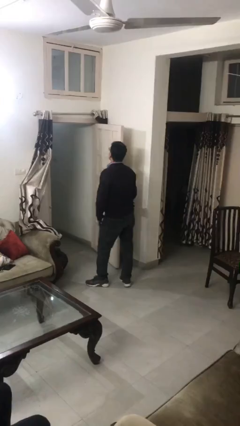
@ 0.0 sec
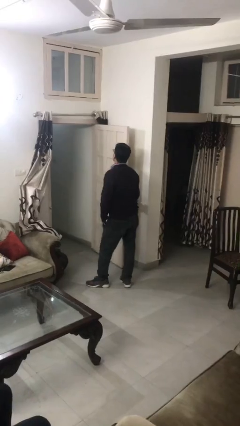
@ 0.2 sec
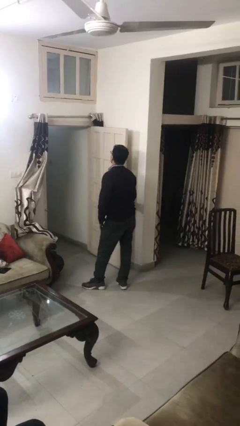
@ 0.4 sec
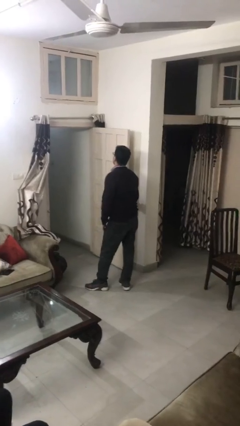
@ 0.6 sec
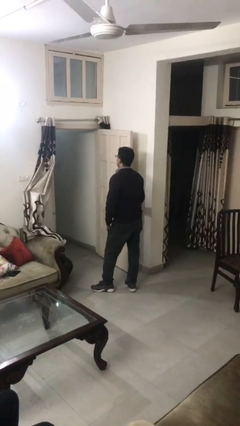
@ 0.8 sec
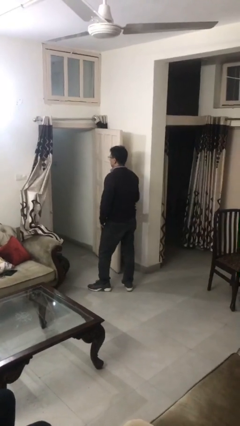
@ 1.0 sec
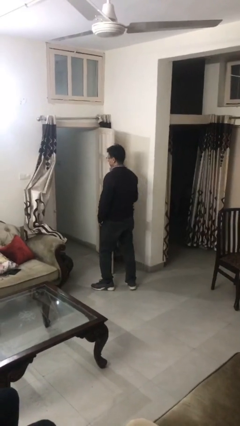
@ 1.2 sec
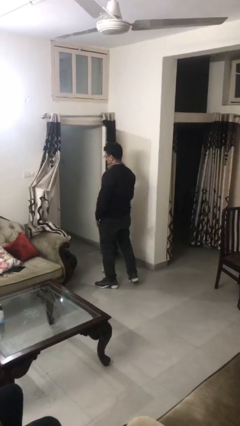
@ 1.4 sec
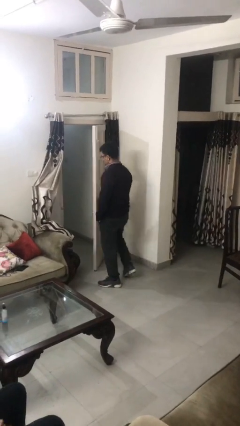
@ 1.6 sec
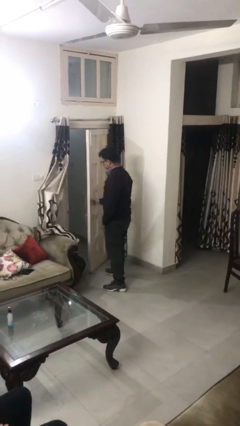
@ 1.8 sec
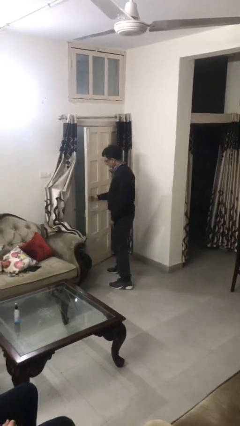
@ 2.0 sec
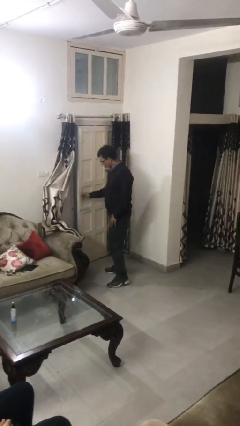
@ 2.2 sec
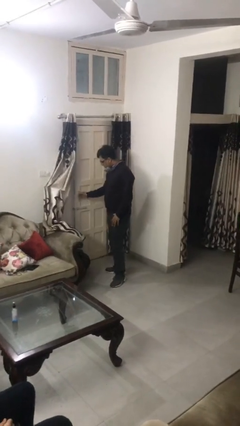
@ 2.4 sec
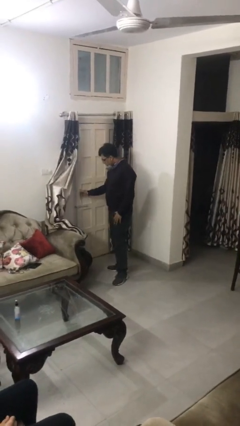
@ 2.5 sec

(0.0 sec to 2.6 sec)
person closes facility door

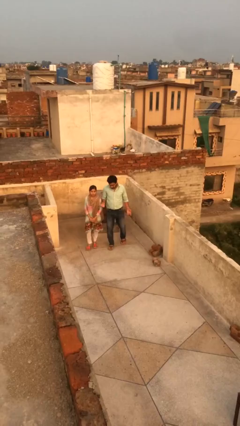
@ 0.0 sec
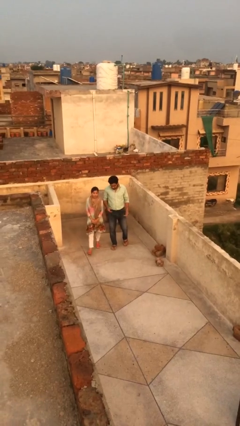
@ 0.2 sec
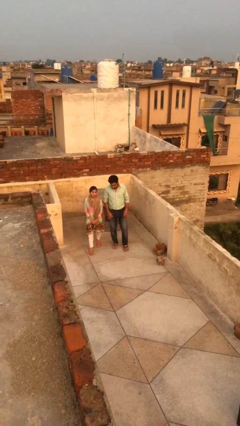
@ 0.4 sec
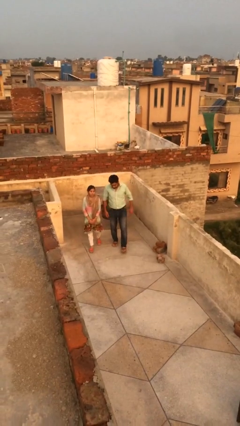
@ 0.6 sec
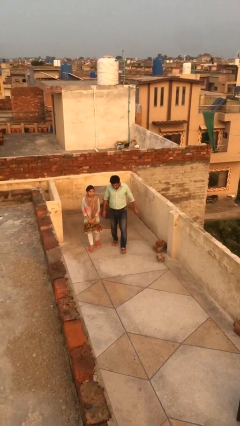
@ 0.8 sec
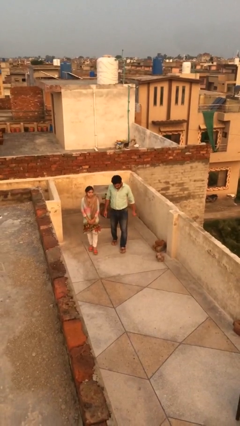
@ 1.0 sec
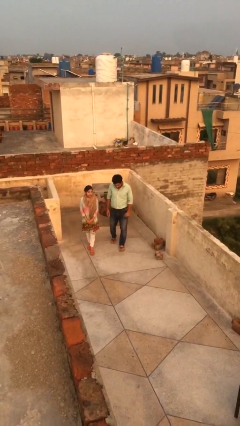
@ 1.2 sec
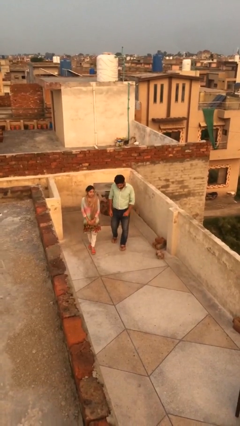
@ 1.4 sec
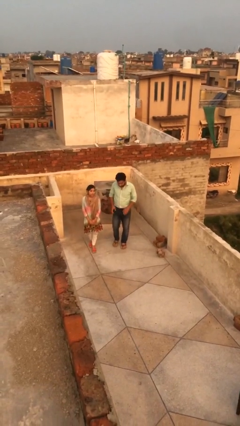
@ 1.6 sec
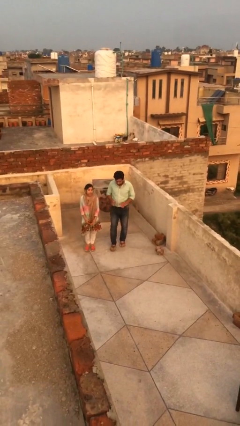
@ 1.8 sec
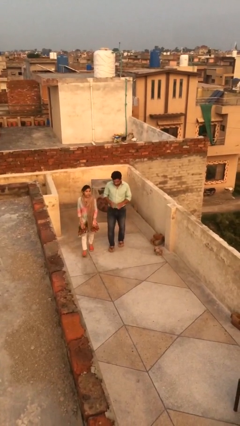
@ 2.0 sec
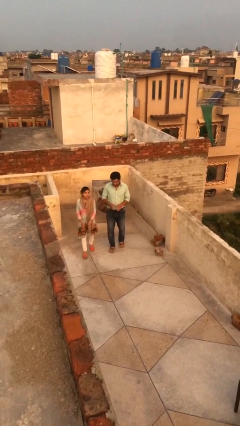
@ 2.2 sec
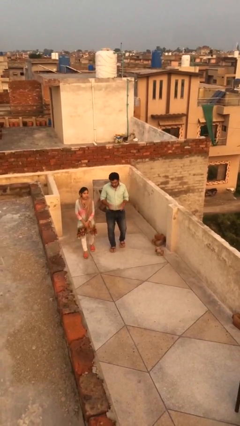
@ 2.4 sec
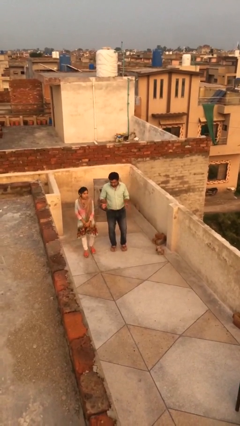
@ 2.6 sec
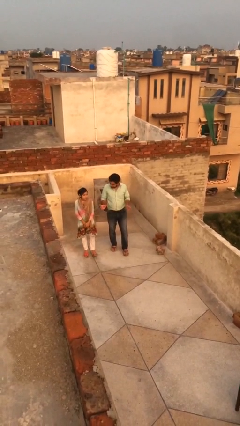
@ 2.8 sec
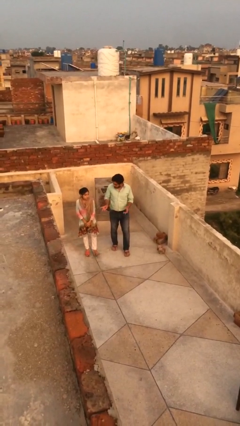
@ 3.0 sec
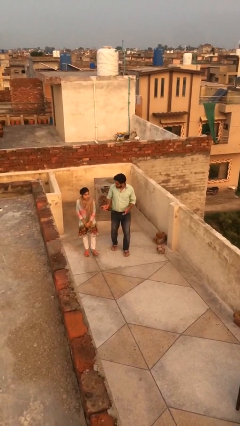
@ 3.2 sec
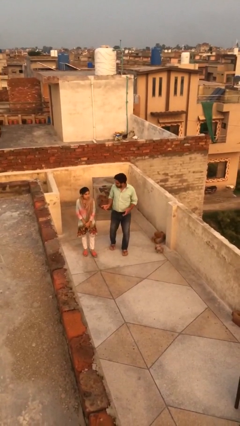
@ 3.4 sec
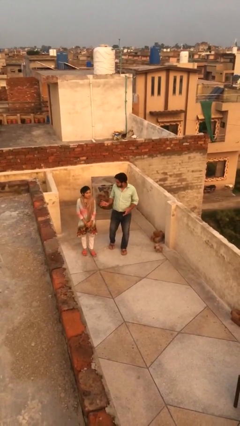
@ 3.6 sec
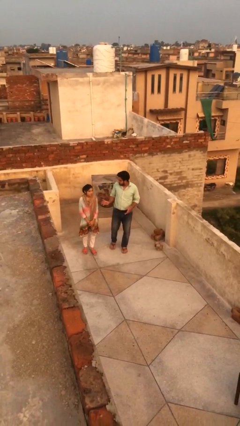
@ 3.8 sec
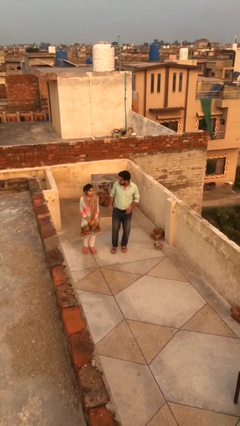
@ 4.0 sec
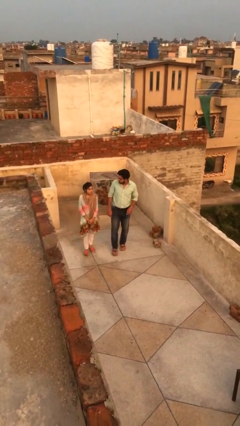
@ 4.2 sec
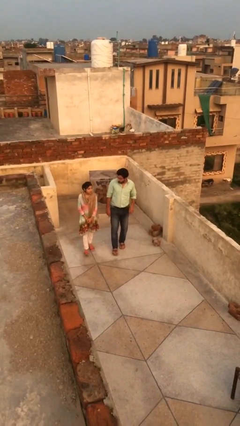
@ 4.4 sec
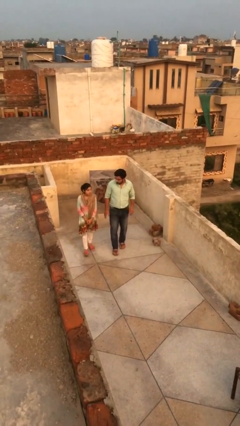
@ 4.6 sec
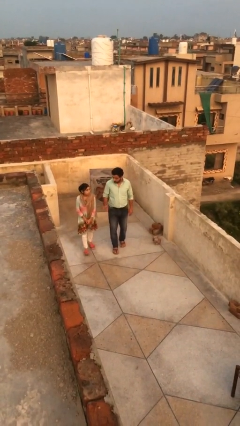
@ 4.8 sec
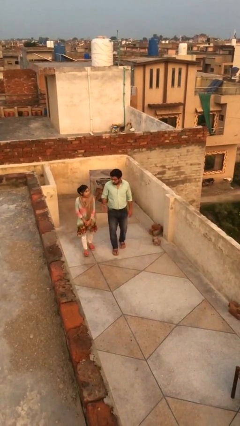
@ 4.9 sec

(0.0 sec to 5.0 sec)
person talks to person

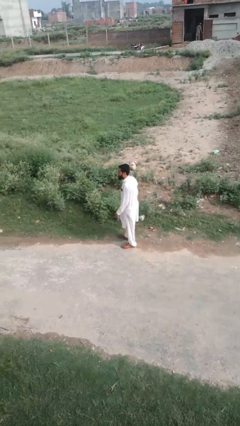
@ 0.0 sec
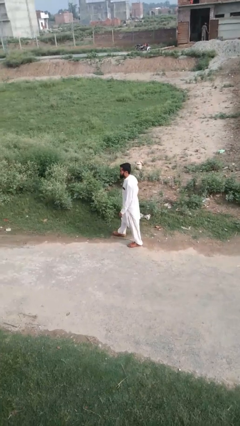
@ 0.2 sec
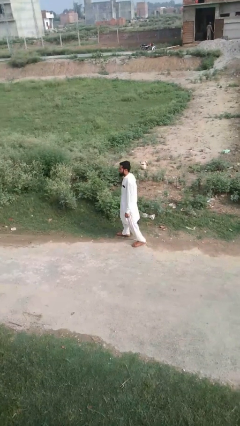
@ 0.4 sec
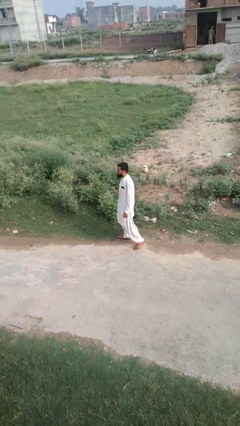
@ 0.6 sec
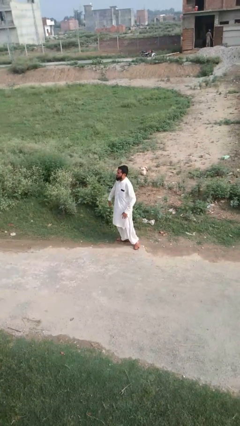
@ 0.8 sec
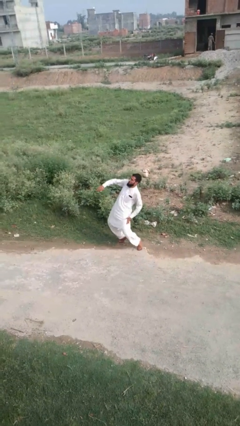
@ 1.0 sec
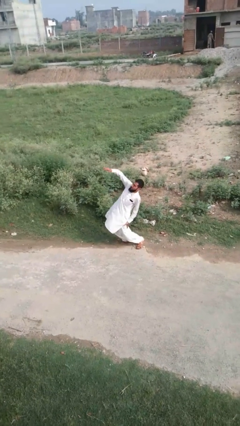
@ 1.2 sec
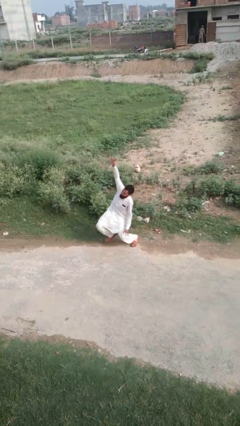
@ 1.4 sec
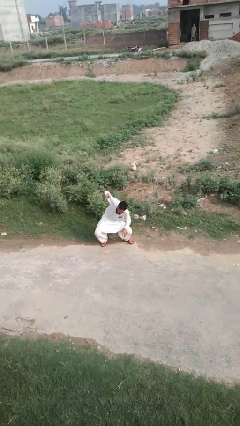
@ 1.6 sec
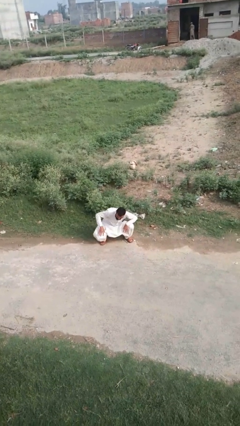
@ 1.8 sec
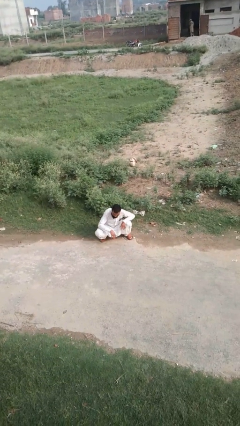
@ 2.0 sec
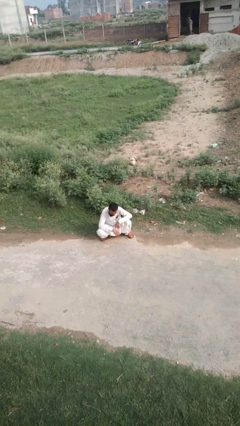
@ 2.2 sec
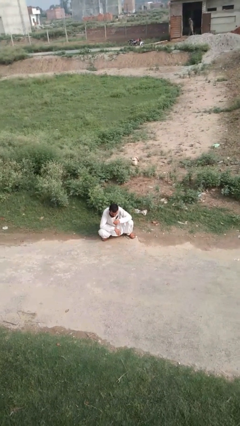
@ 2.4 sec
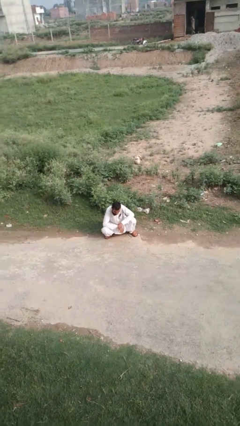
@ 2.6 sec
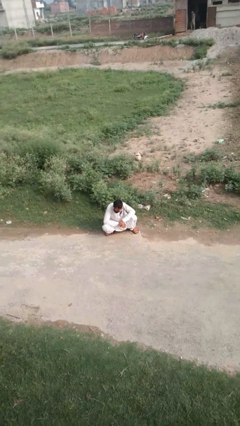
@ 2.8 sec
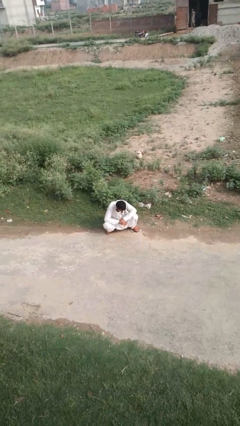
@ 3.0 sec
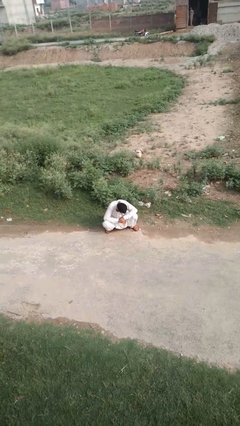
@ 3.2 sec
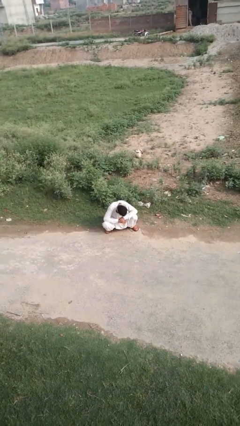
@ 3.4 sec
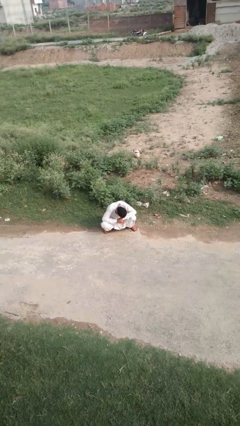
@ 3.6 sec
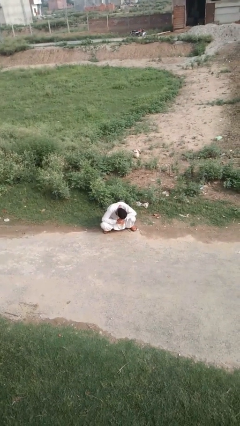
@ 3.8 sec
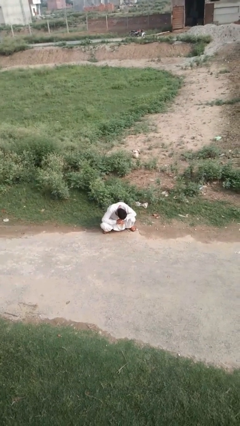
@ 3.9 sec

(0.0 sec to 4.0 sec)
person trips on object on floor

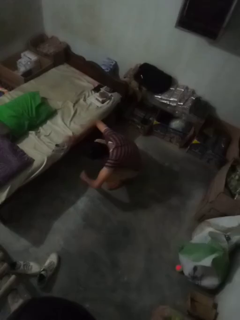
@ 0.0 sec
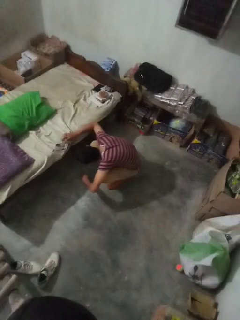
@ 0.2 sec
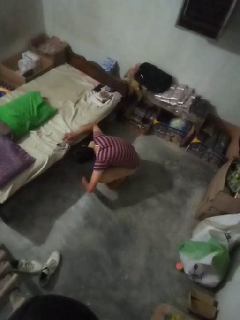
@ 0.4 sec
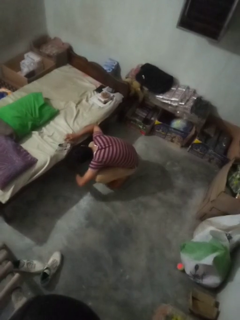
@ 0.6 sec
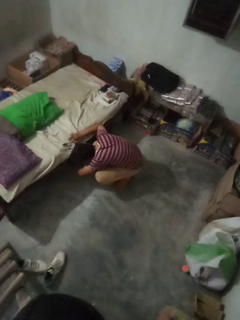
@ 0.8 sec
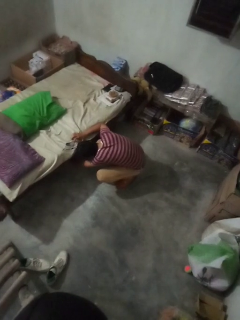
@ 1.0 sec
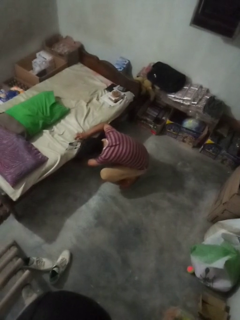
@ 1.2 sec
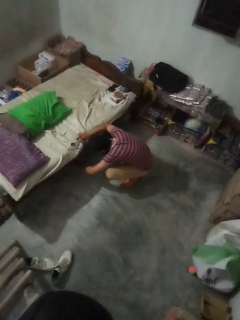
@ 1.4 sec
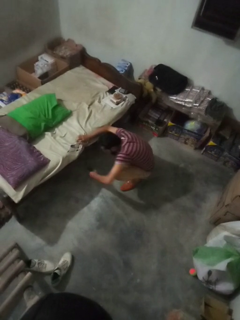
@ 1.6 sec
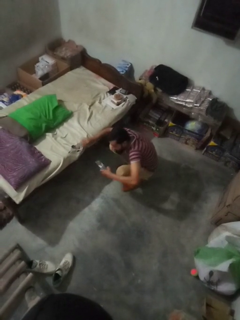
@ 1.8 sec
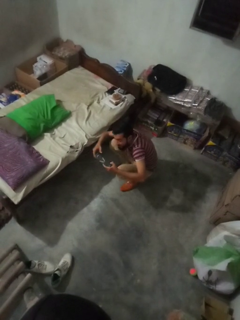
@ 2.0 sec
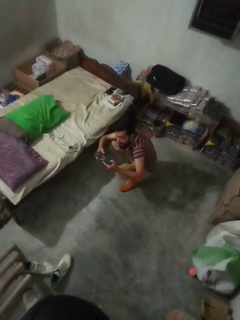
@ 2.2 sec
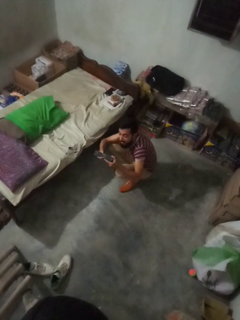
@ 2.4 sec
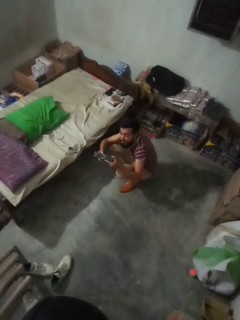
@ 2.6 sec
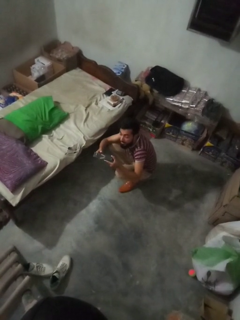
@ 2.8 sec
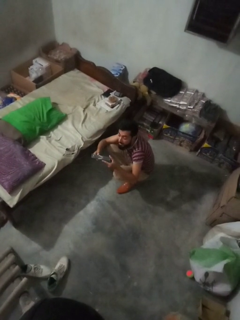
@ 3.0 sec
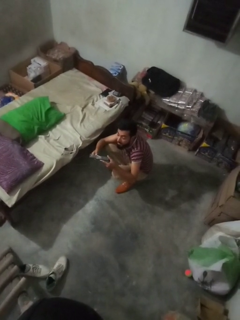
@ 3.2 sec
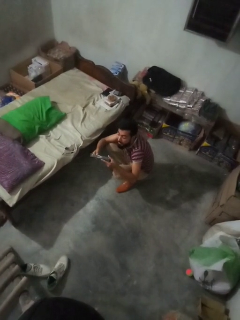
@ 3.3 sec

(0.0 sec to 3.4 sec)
person searches under couch

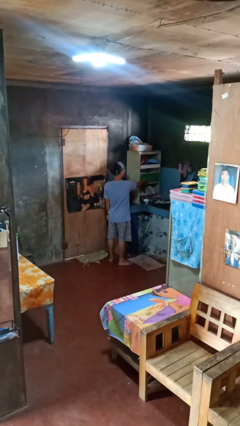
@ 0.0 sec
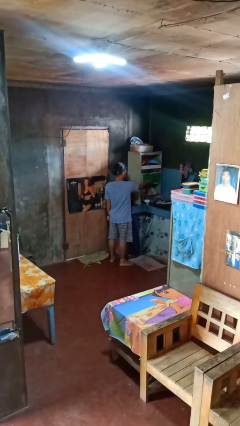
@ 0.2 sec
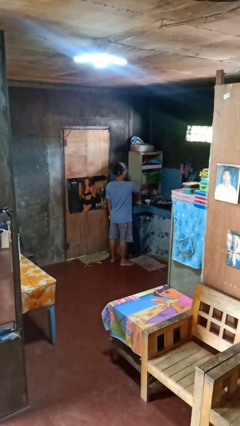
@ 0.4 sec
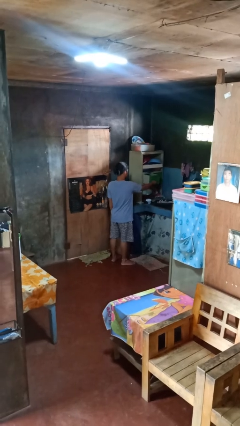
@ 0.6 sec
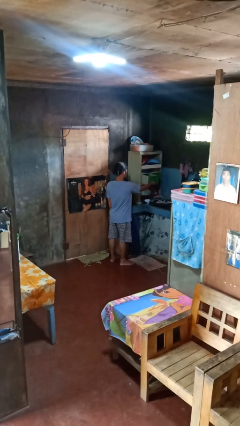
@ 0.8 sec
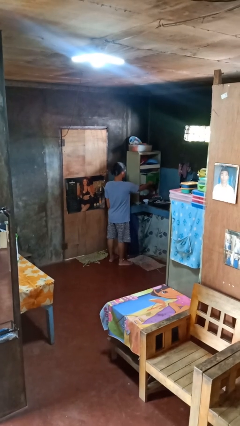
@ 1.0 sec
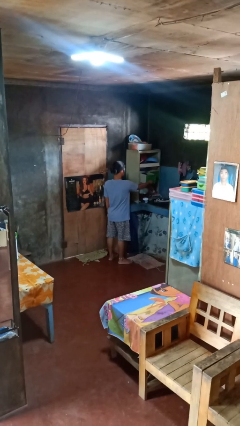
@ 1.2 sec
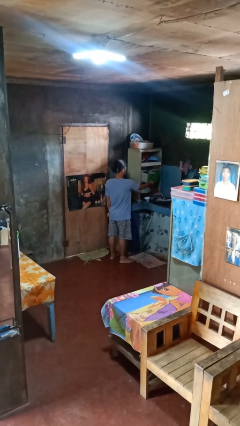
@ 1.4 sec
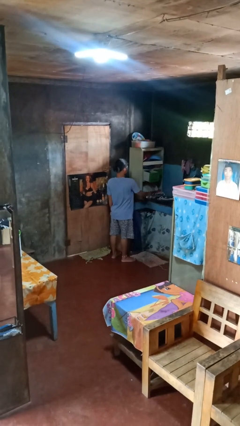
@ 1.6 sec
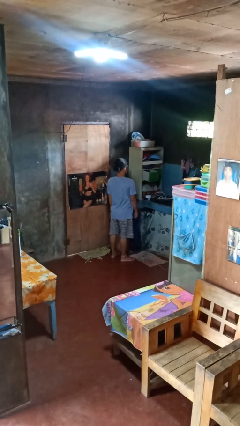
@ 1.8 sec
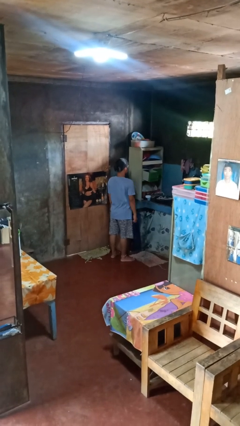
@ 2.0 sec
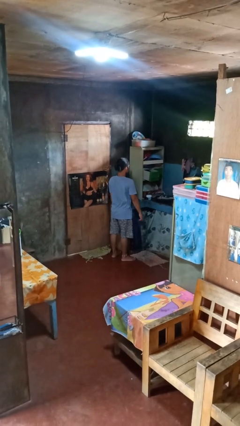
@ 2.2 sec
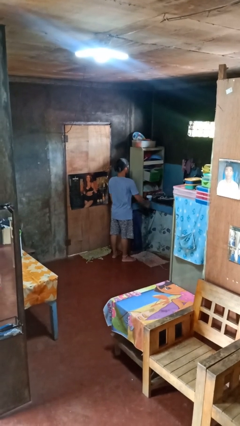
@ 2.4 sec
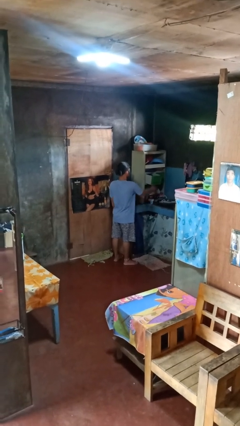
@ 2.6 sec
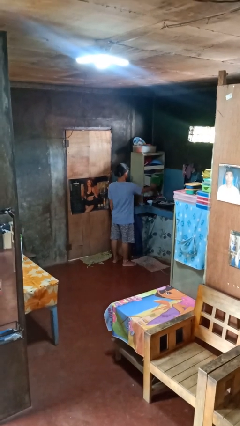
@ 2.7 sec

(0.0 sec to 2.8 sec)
person opens kitchen drawer

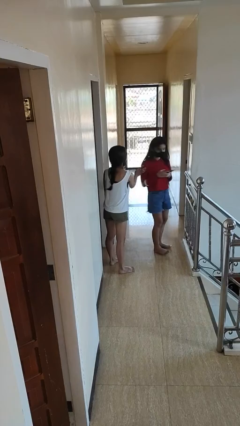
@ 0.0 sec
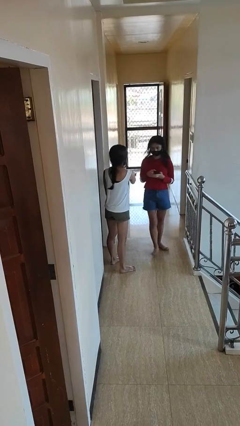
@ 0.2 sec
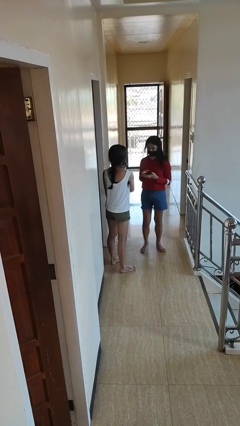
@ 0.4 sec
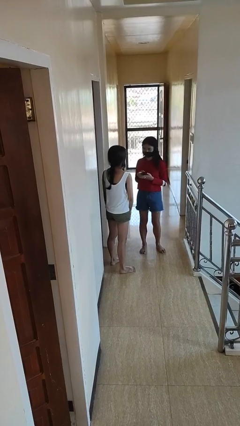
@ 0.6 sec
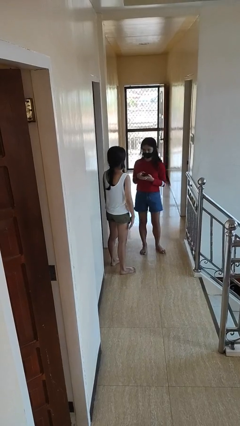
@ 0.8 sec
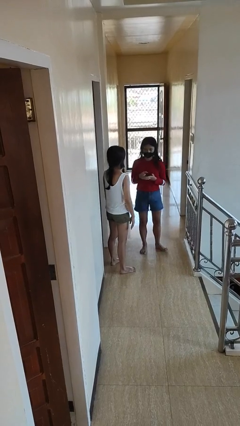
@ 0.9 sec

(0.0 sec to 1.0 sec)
person spins person around
